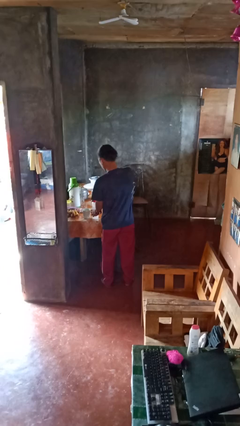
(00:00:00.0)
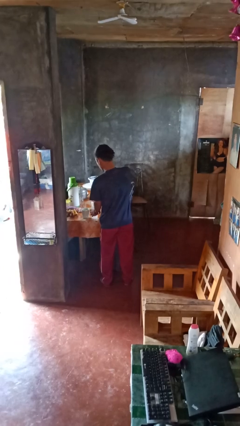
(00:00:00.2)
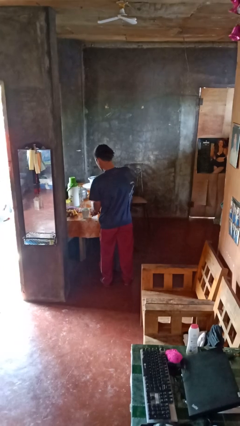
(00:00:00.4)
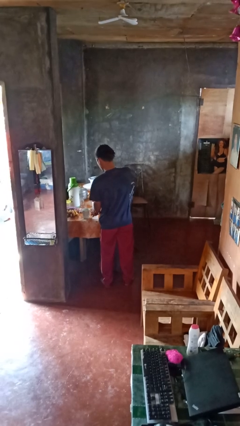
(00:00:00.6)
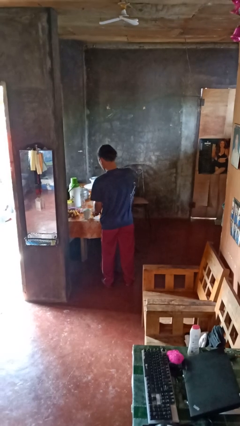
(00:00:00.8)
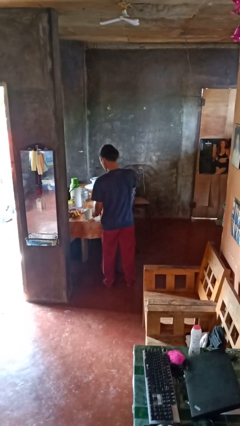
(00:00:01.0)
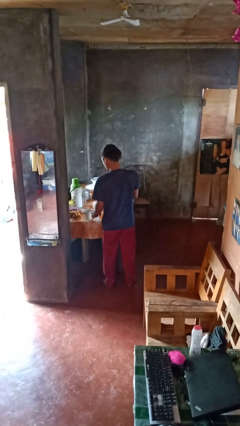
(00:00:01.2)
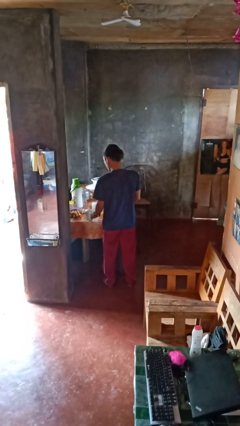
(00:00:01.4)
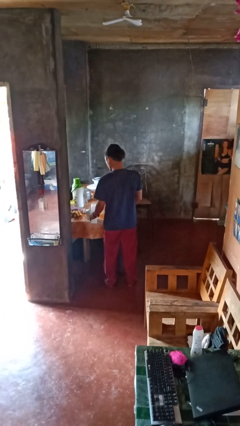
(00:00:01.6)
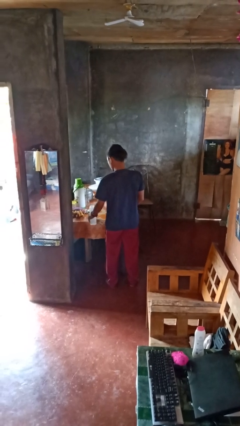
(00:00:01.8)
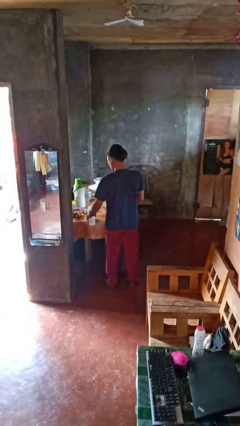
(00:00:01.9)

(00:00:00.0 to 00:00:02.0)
person unscrews lid from bottle

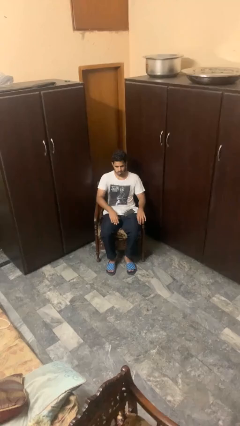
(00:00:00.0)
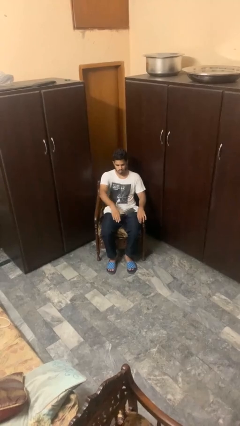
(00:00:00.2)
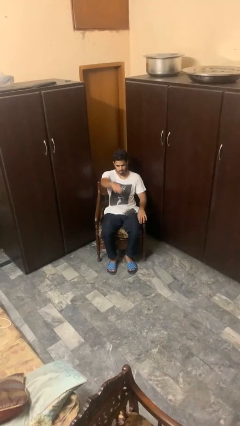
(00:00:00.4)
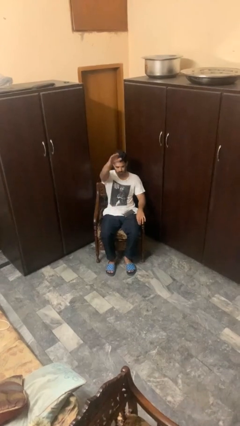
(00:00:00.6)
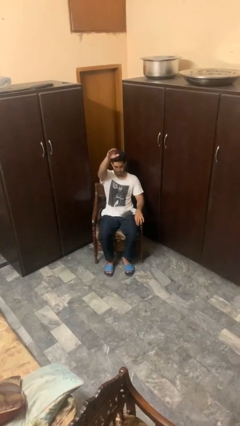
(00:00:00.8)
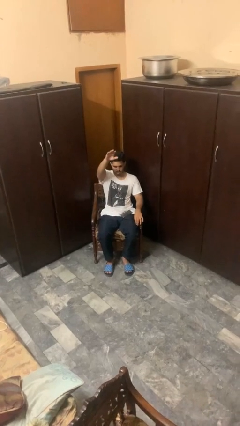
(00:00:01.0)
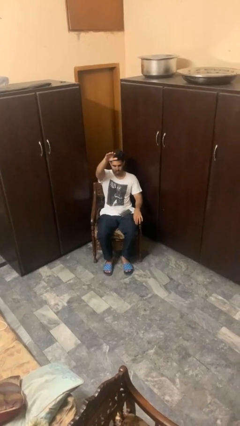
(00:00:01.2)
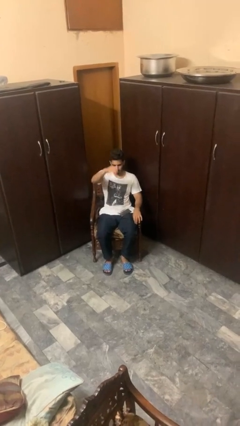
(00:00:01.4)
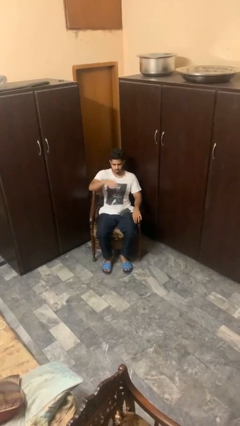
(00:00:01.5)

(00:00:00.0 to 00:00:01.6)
person gestures swipe up

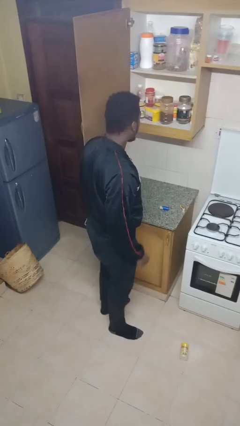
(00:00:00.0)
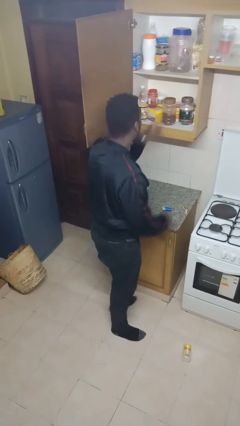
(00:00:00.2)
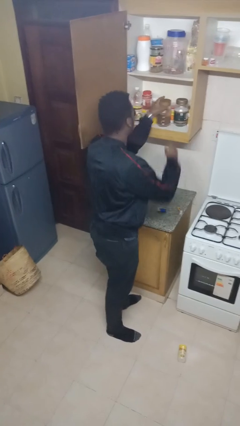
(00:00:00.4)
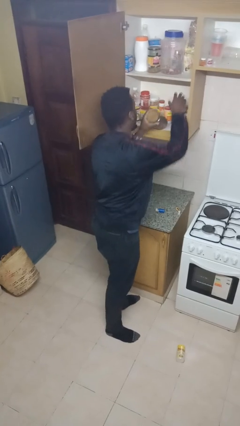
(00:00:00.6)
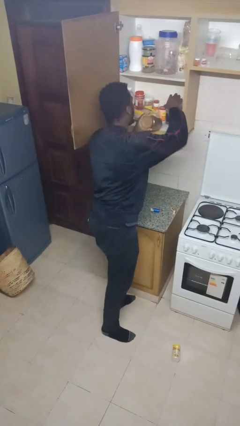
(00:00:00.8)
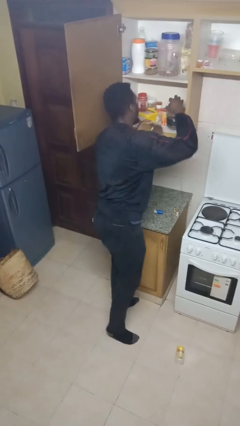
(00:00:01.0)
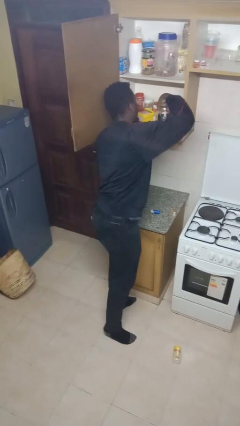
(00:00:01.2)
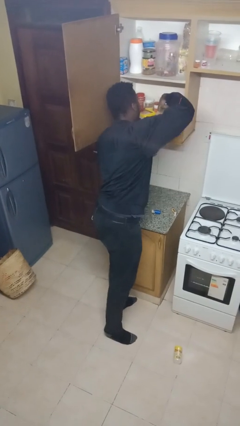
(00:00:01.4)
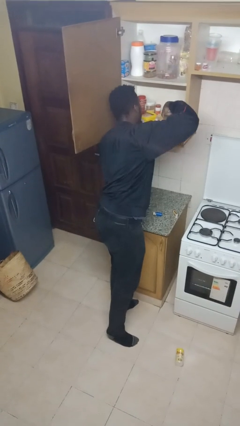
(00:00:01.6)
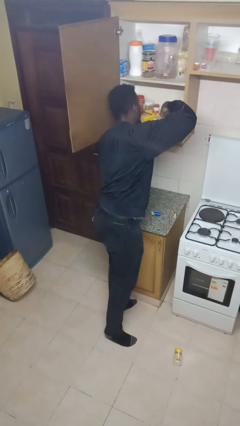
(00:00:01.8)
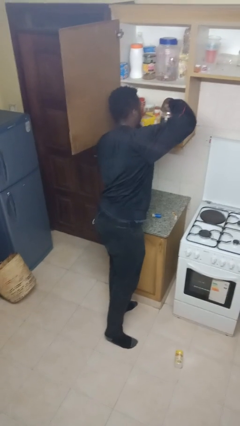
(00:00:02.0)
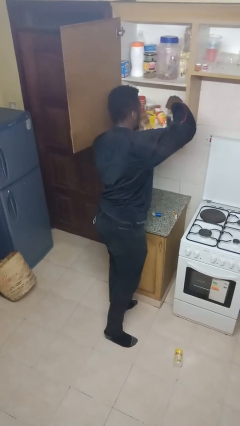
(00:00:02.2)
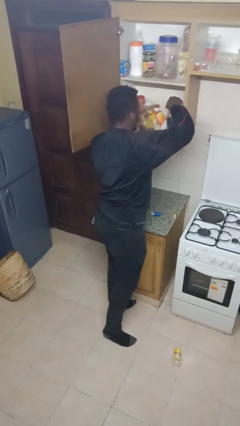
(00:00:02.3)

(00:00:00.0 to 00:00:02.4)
person searches in cabinet

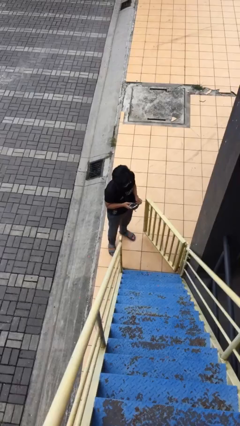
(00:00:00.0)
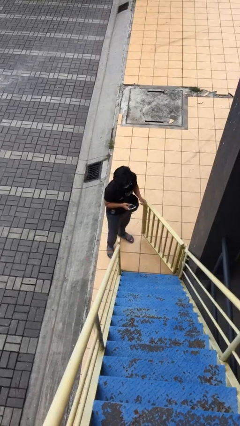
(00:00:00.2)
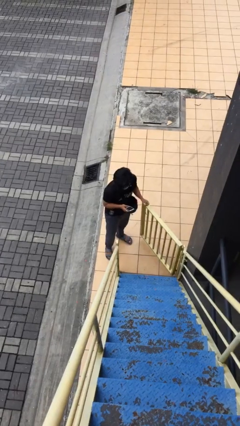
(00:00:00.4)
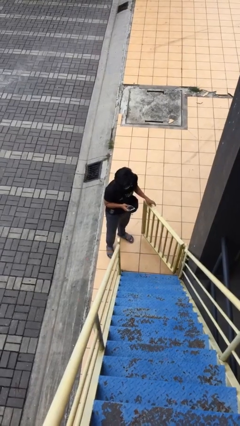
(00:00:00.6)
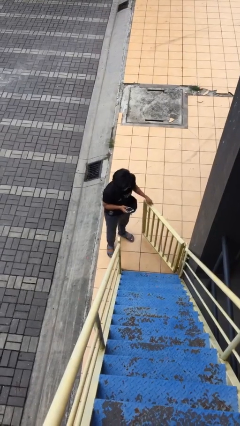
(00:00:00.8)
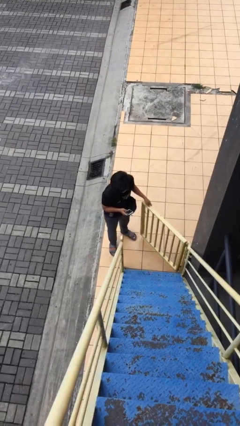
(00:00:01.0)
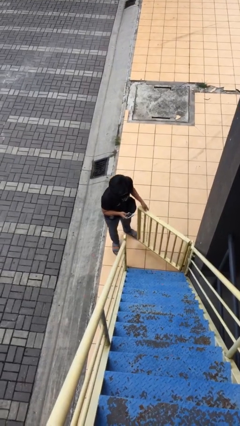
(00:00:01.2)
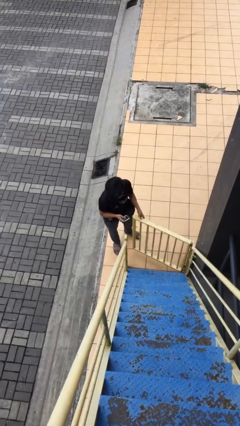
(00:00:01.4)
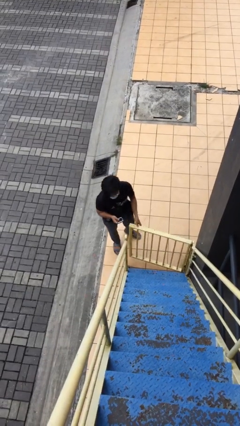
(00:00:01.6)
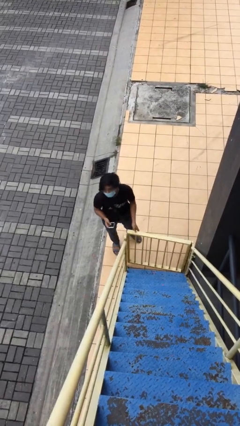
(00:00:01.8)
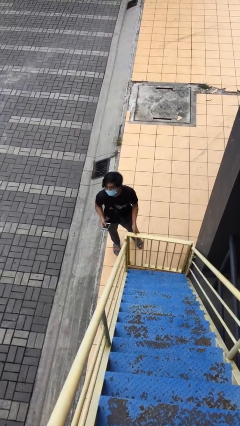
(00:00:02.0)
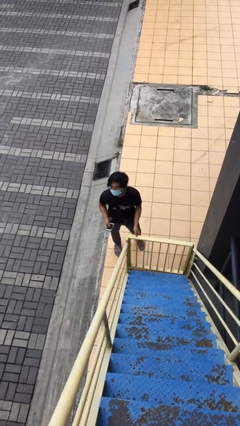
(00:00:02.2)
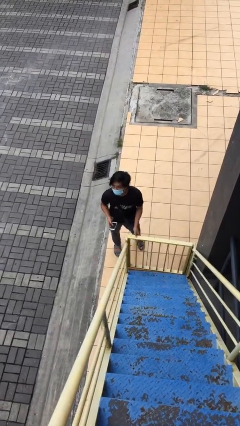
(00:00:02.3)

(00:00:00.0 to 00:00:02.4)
person closes facility door

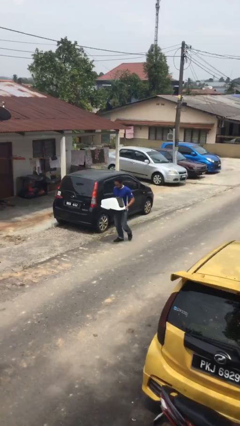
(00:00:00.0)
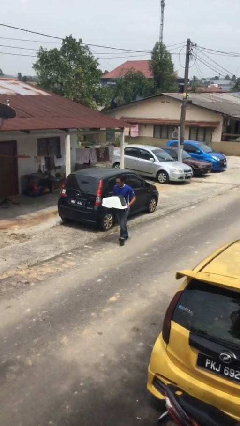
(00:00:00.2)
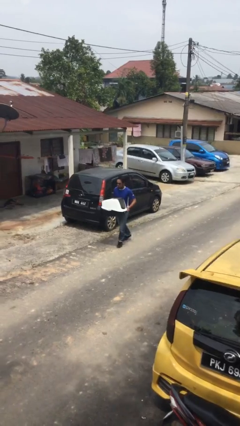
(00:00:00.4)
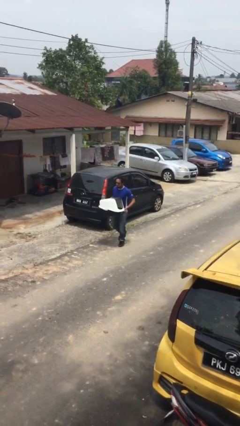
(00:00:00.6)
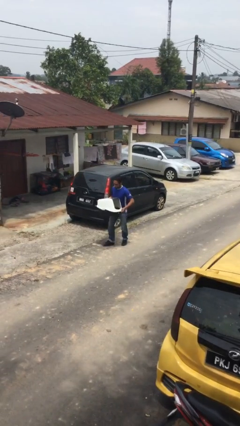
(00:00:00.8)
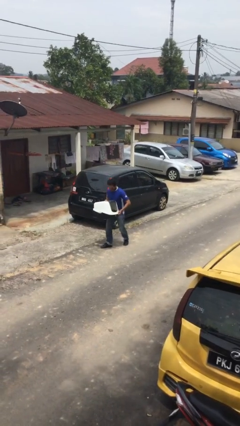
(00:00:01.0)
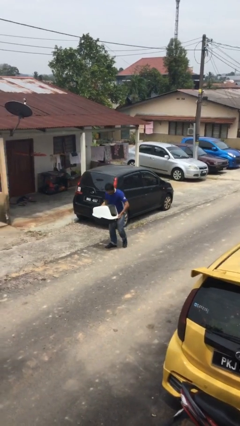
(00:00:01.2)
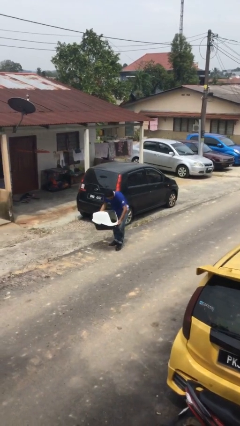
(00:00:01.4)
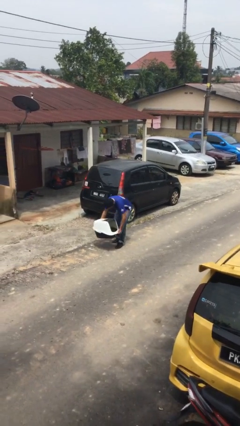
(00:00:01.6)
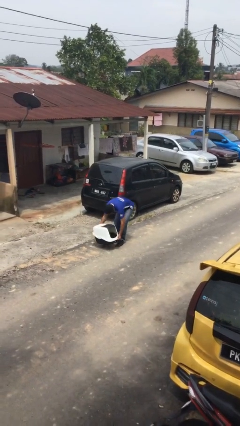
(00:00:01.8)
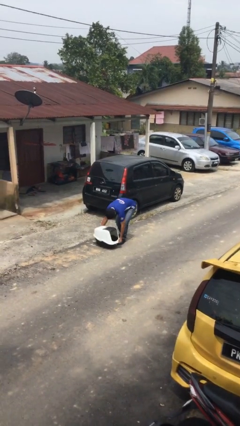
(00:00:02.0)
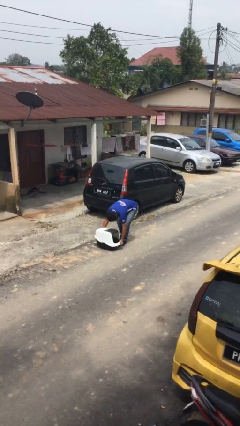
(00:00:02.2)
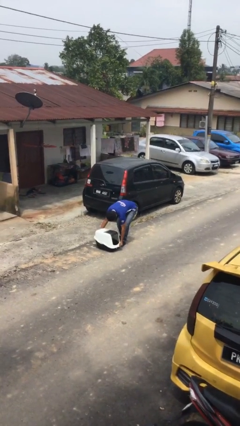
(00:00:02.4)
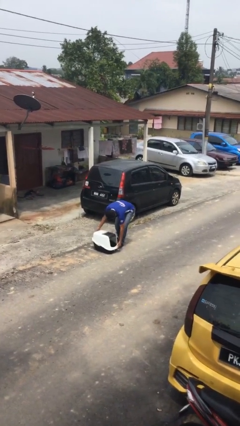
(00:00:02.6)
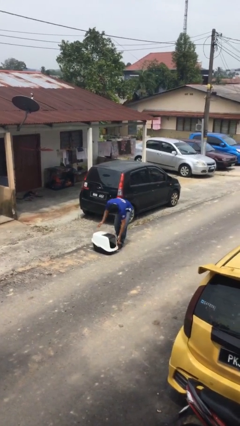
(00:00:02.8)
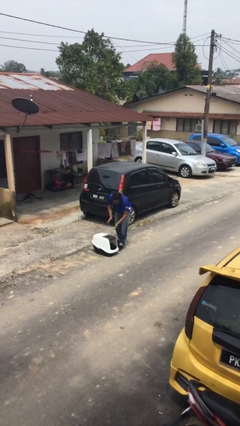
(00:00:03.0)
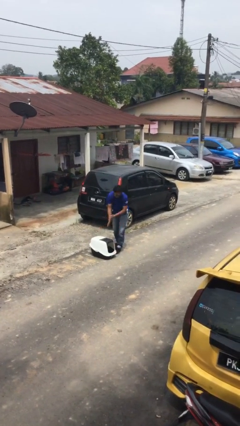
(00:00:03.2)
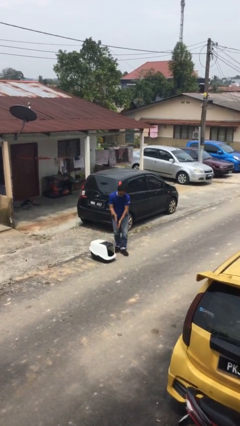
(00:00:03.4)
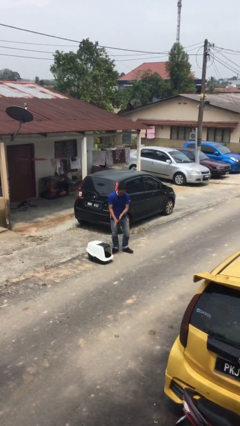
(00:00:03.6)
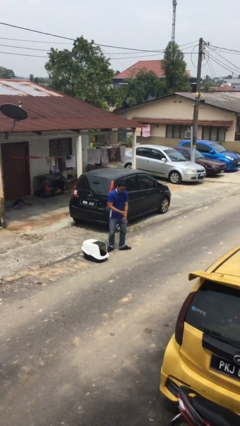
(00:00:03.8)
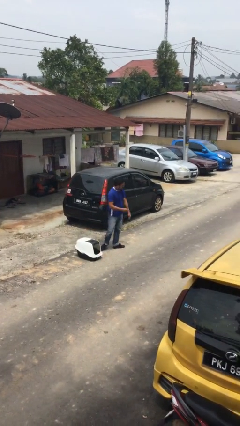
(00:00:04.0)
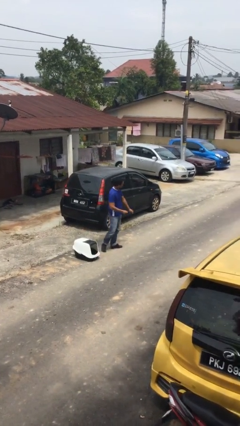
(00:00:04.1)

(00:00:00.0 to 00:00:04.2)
person puts down object on floor

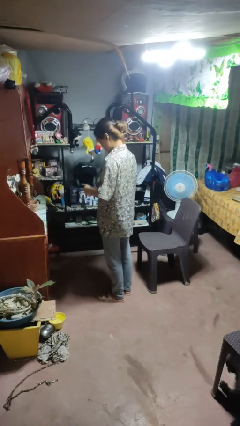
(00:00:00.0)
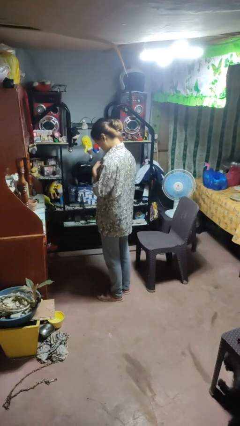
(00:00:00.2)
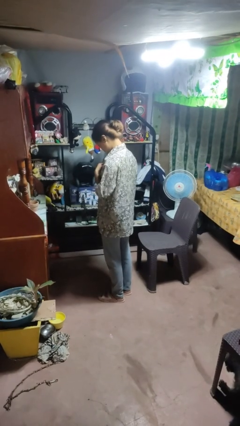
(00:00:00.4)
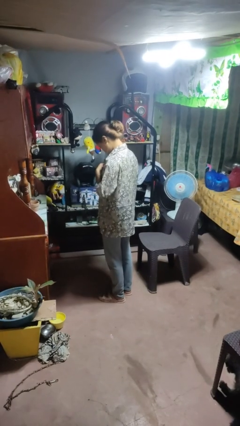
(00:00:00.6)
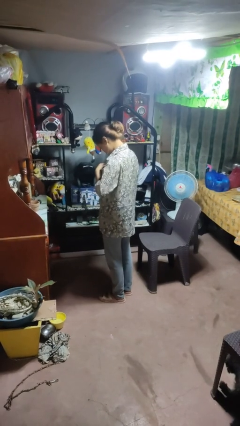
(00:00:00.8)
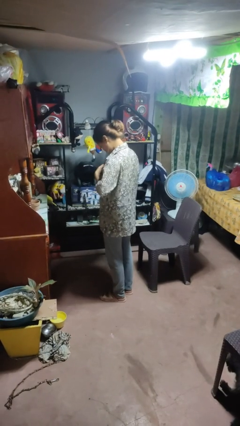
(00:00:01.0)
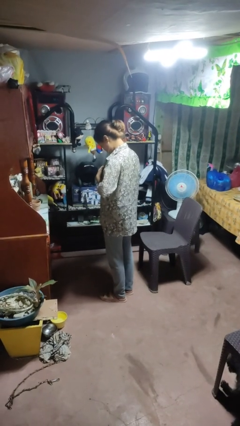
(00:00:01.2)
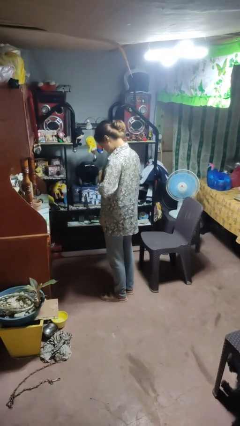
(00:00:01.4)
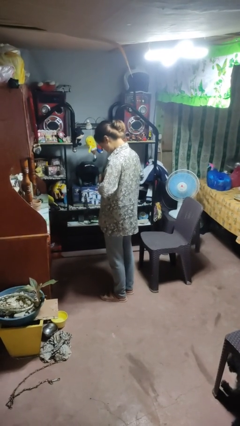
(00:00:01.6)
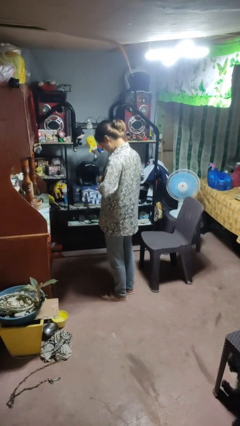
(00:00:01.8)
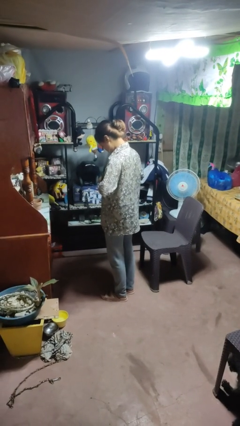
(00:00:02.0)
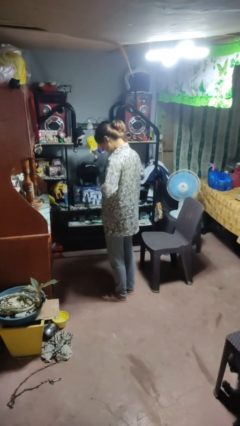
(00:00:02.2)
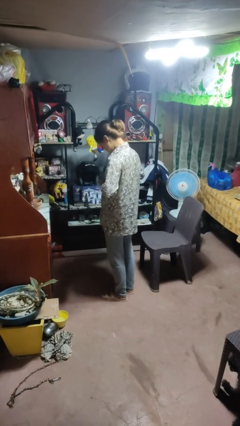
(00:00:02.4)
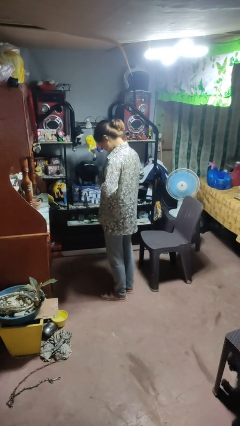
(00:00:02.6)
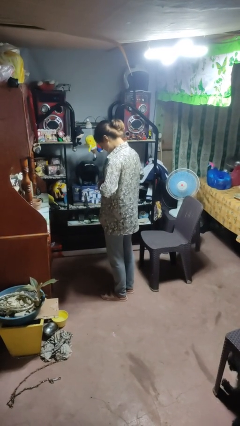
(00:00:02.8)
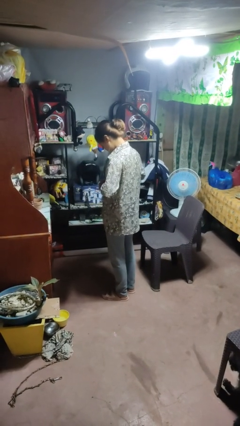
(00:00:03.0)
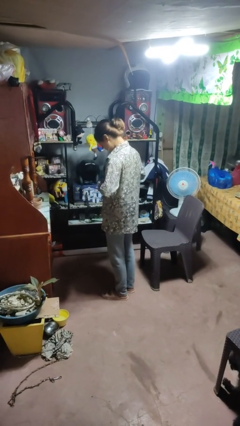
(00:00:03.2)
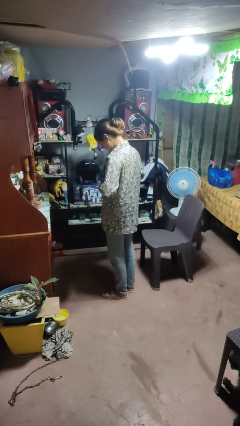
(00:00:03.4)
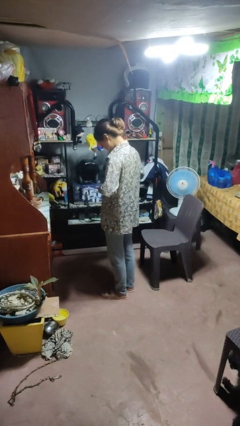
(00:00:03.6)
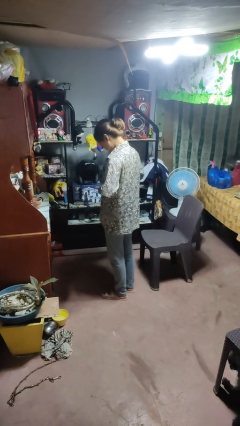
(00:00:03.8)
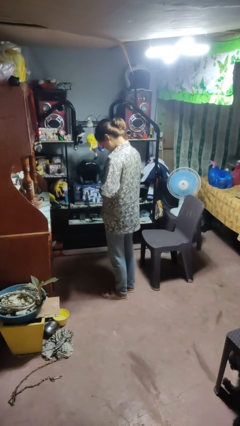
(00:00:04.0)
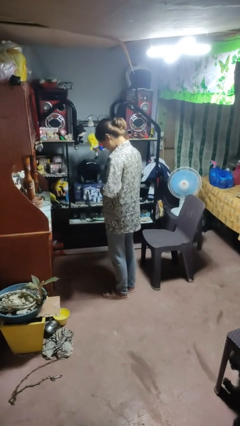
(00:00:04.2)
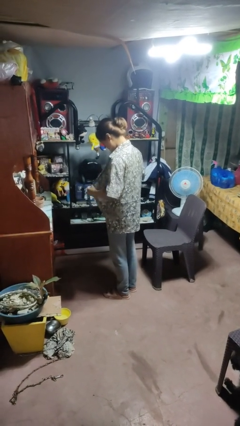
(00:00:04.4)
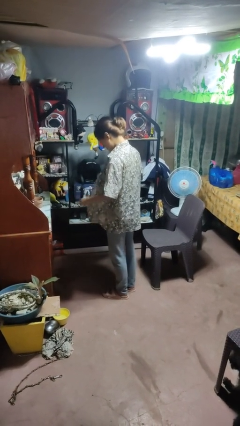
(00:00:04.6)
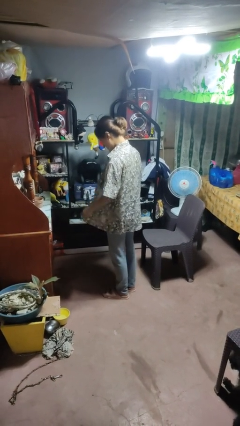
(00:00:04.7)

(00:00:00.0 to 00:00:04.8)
person unbuttons shirt
